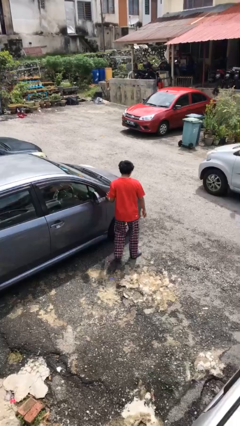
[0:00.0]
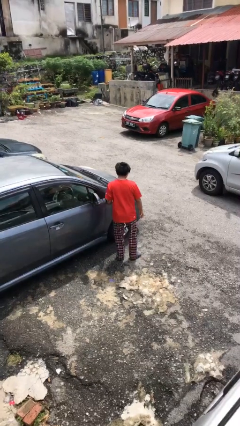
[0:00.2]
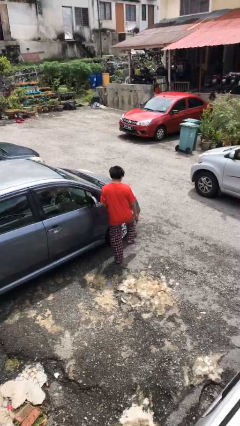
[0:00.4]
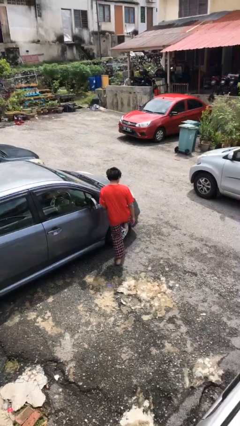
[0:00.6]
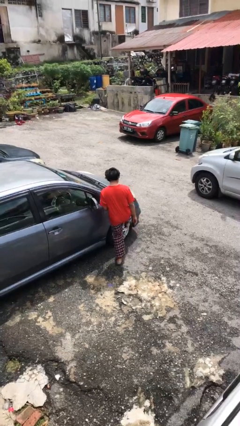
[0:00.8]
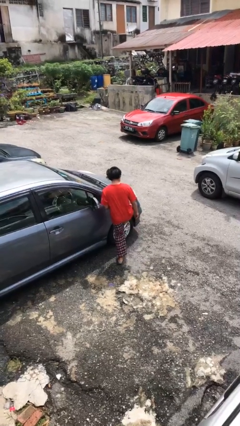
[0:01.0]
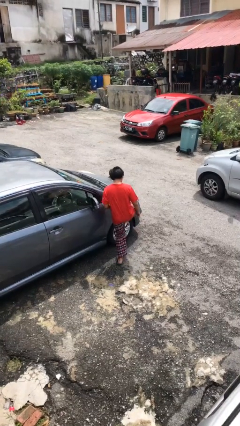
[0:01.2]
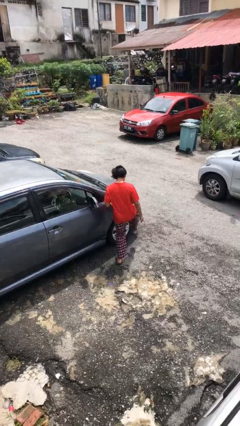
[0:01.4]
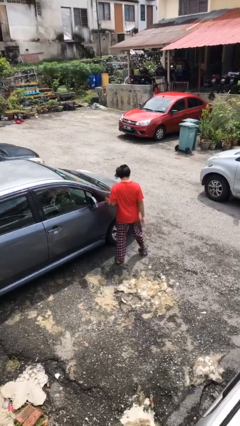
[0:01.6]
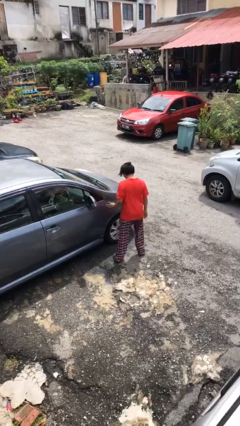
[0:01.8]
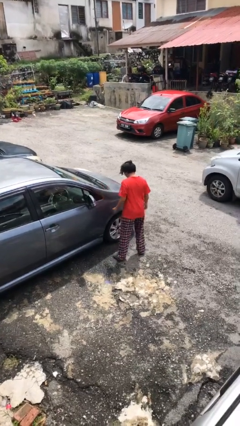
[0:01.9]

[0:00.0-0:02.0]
person kicks car tires

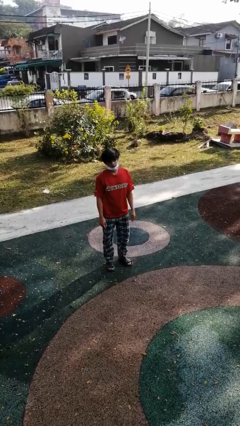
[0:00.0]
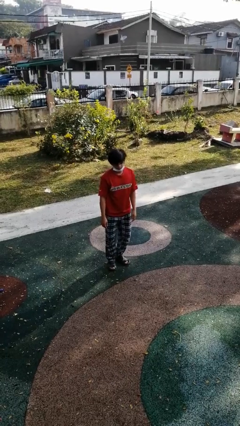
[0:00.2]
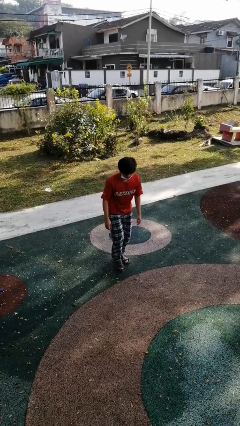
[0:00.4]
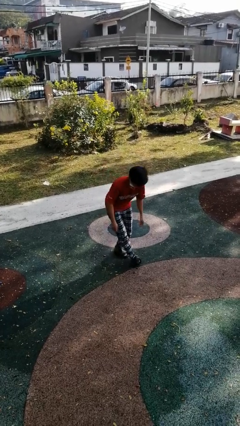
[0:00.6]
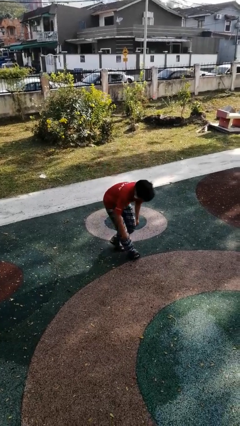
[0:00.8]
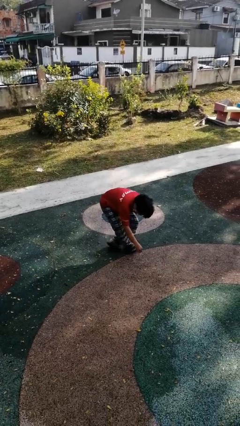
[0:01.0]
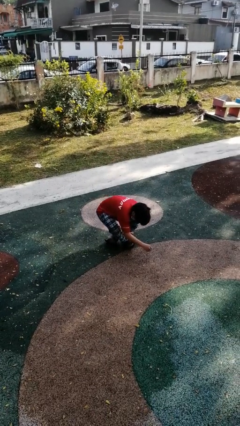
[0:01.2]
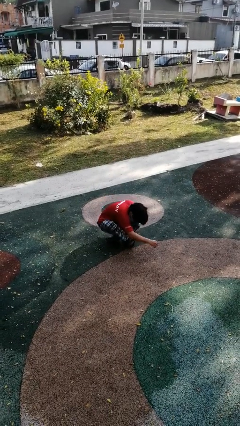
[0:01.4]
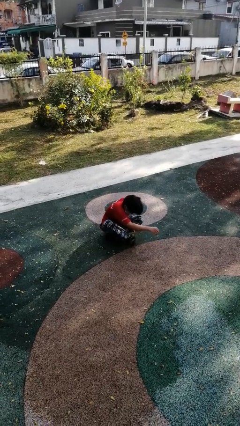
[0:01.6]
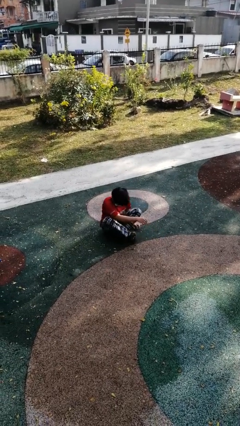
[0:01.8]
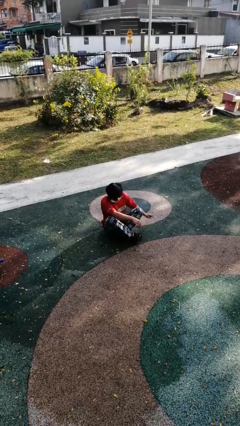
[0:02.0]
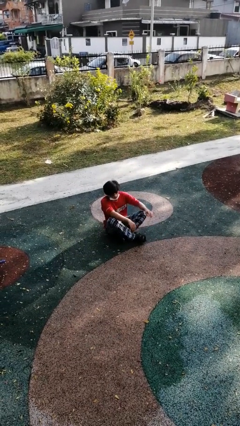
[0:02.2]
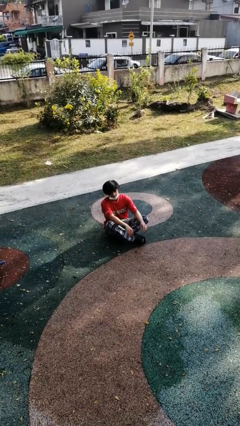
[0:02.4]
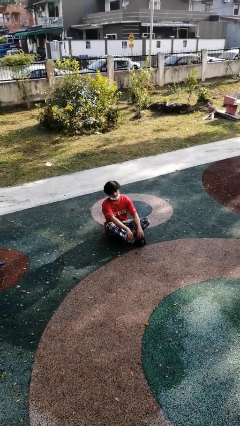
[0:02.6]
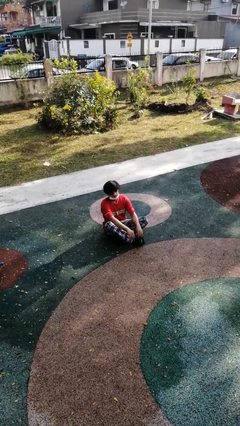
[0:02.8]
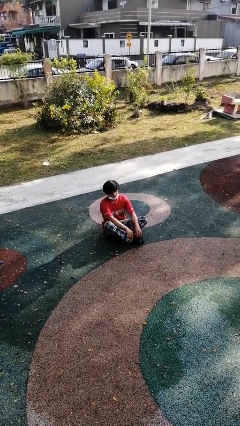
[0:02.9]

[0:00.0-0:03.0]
person sits crisscross

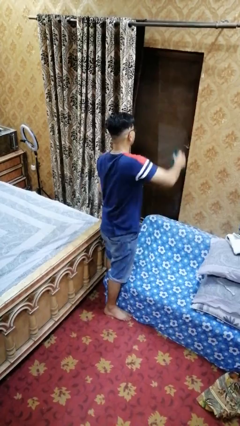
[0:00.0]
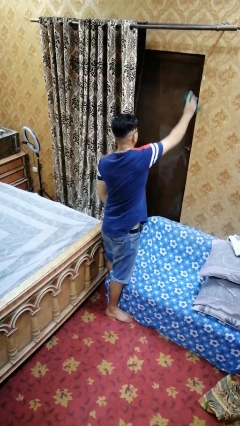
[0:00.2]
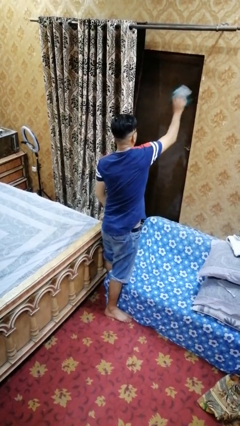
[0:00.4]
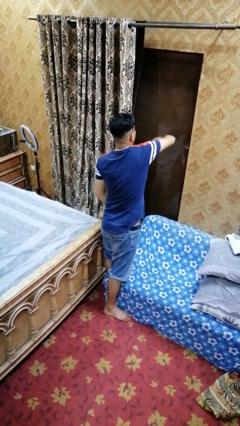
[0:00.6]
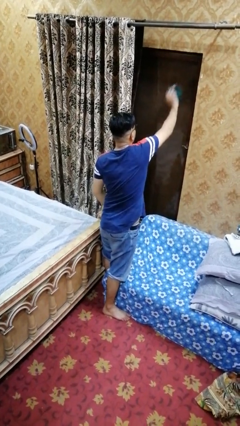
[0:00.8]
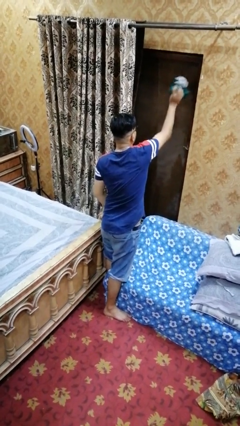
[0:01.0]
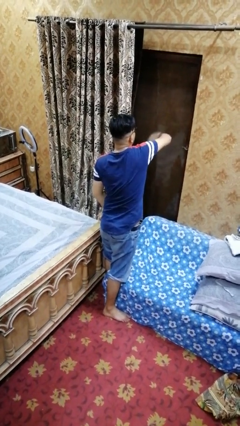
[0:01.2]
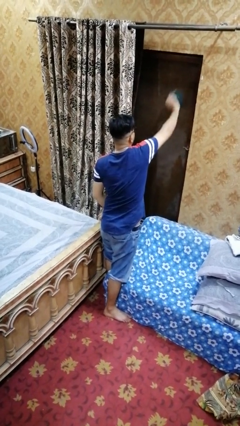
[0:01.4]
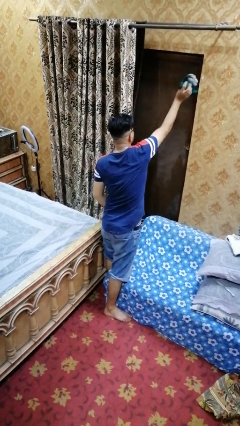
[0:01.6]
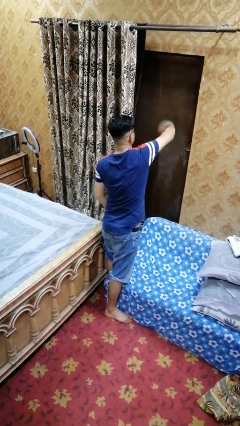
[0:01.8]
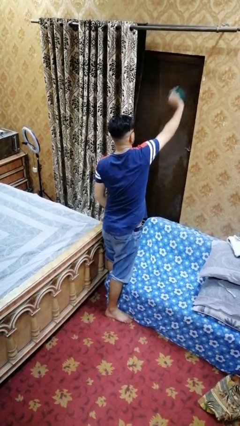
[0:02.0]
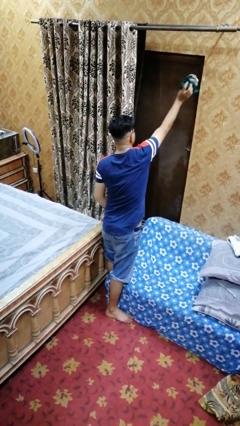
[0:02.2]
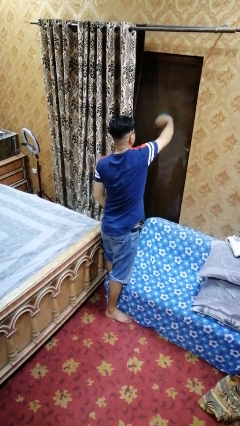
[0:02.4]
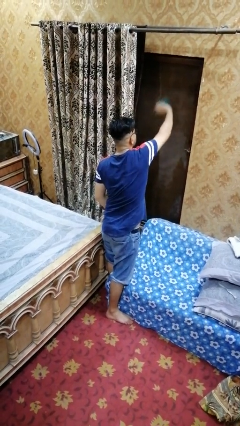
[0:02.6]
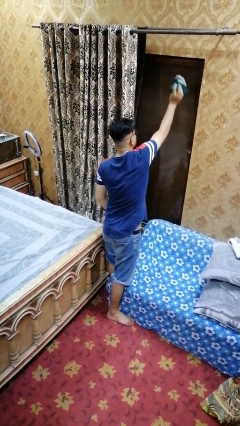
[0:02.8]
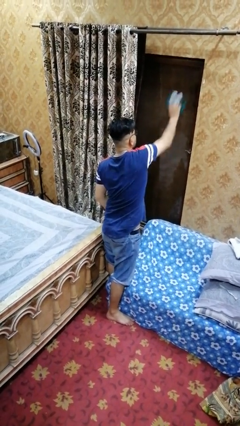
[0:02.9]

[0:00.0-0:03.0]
person washes window

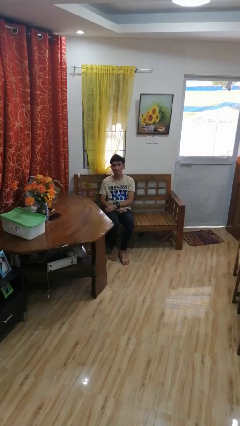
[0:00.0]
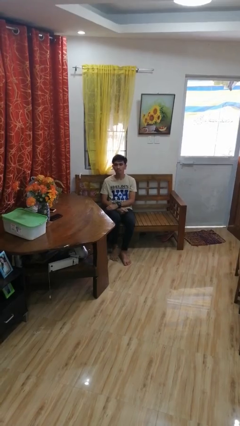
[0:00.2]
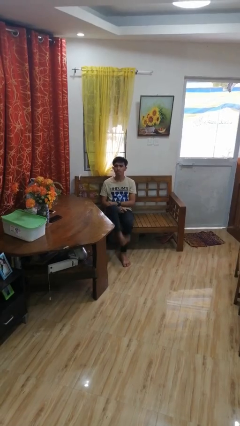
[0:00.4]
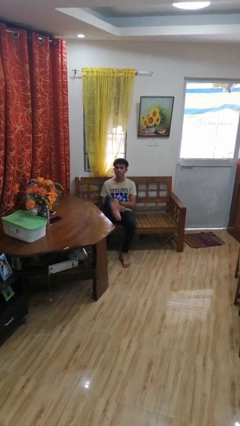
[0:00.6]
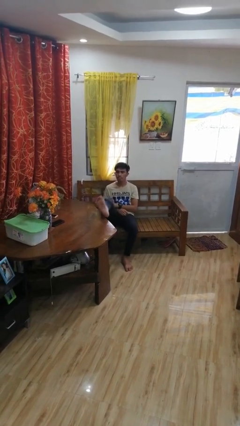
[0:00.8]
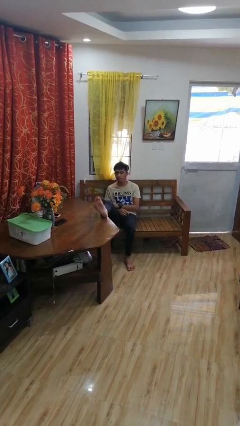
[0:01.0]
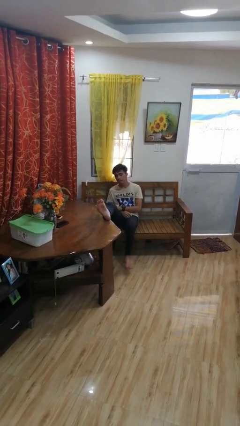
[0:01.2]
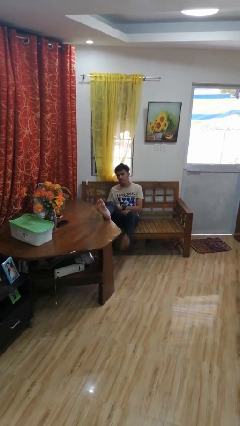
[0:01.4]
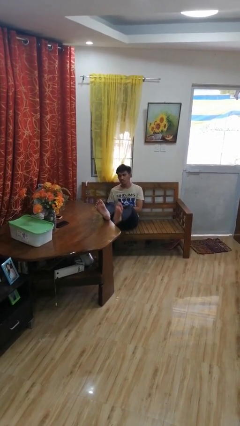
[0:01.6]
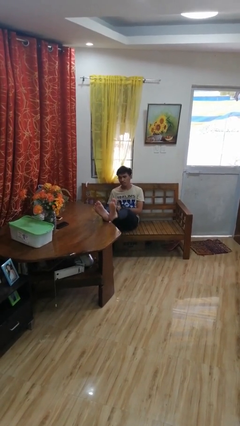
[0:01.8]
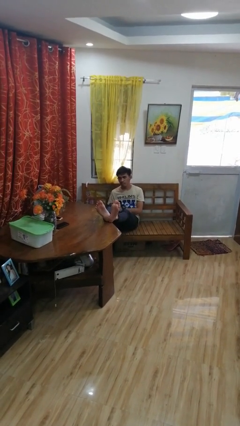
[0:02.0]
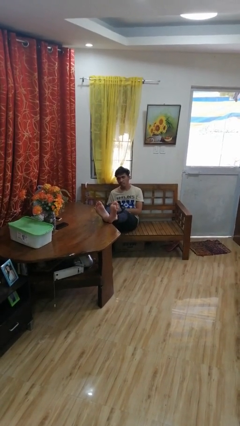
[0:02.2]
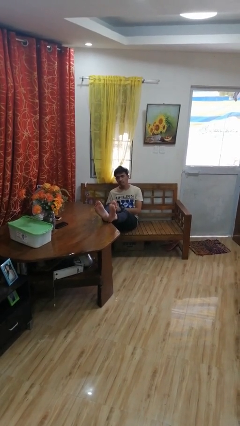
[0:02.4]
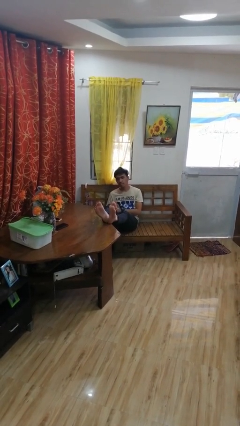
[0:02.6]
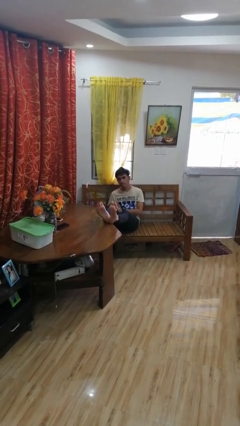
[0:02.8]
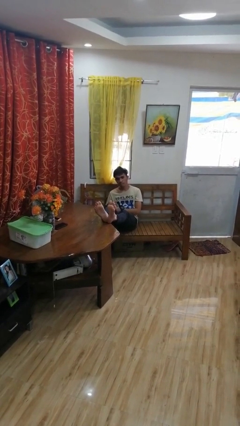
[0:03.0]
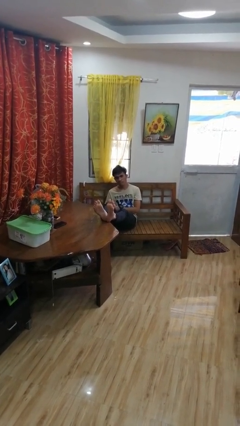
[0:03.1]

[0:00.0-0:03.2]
person puts feet up

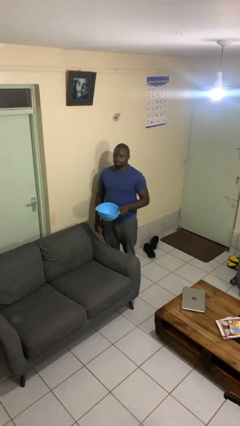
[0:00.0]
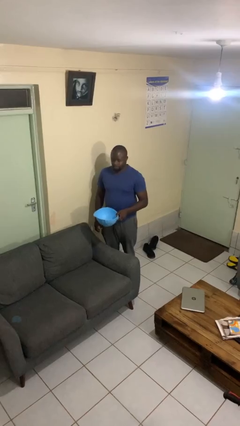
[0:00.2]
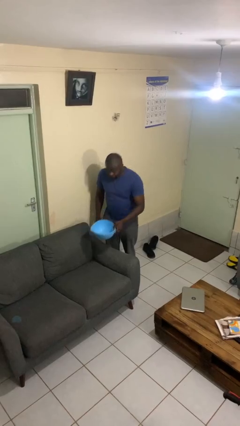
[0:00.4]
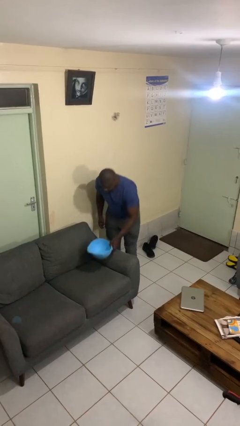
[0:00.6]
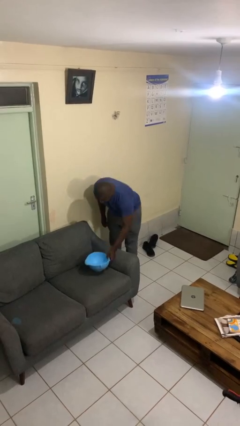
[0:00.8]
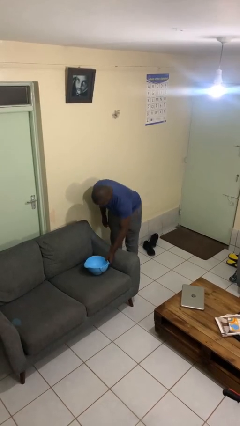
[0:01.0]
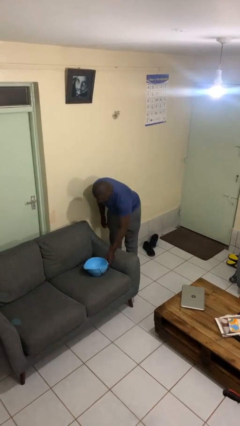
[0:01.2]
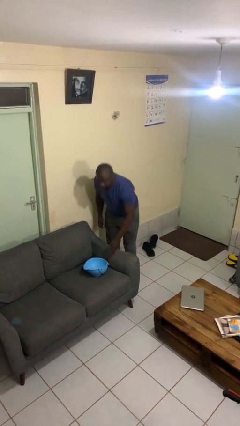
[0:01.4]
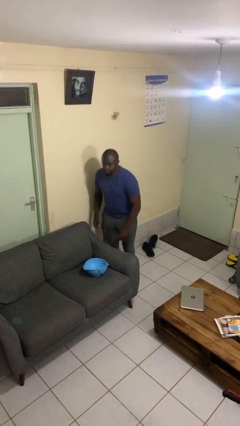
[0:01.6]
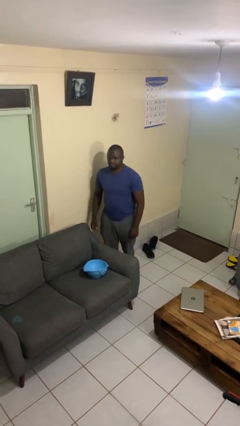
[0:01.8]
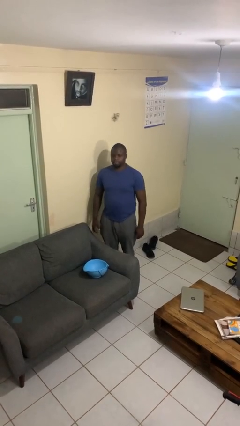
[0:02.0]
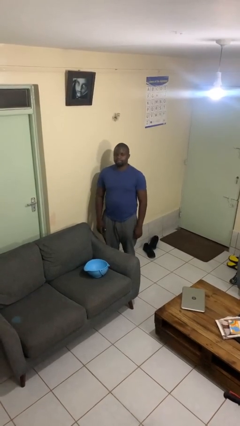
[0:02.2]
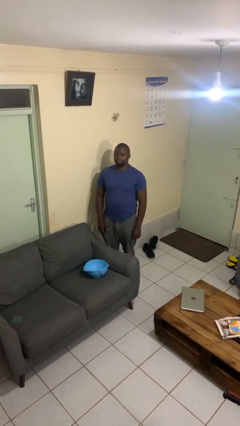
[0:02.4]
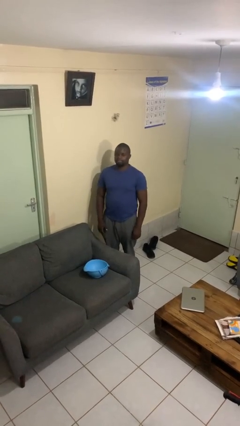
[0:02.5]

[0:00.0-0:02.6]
person puts down object on couch

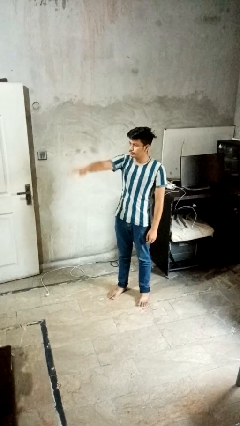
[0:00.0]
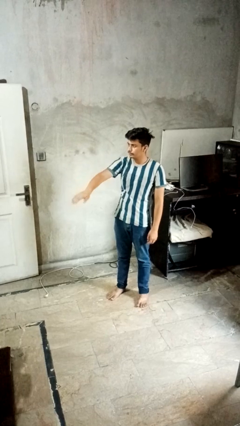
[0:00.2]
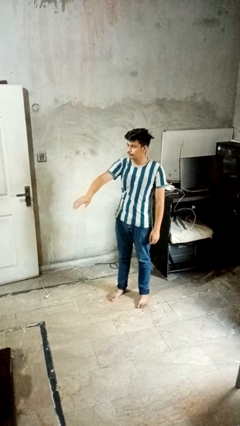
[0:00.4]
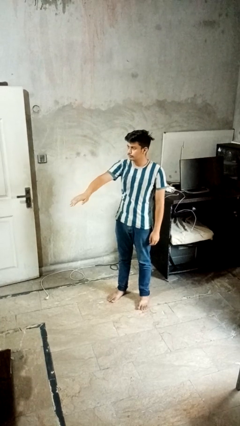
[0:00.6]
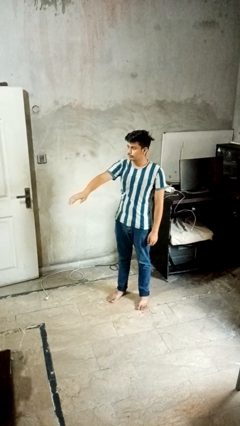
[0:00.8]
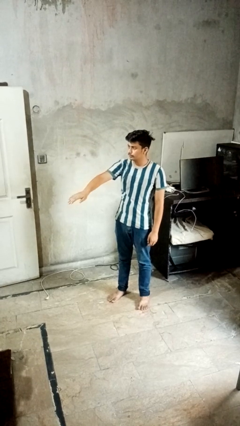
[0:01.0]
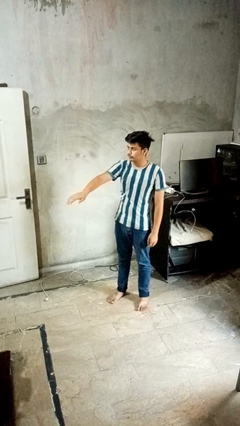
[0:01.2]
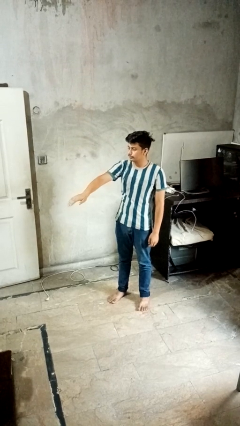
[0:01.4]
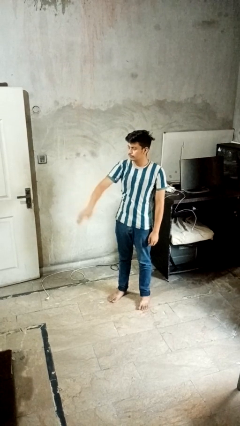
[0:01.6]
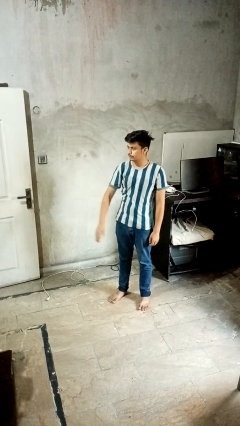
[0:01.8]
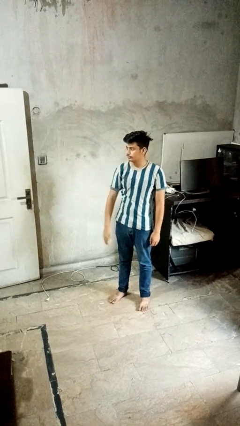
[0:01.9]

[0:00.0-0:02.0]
person gestures swipe down

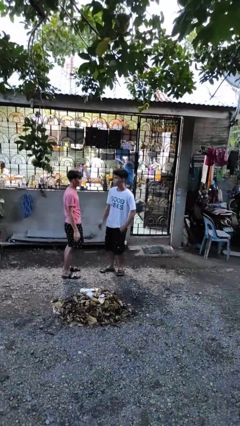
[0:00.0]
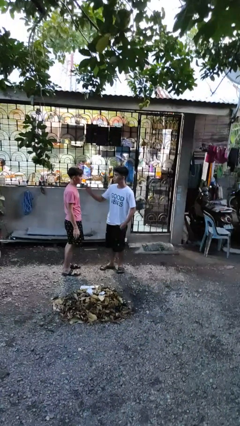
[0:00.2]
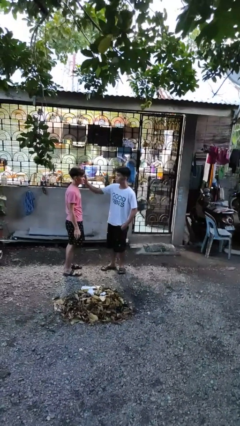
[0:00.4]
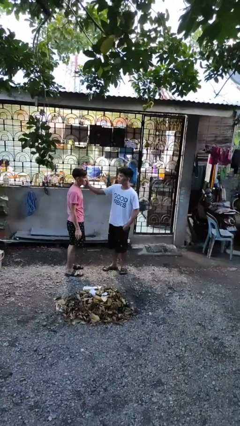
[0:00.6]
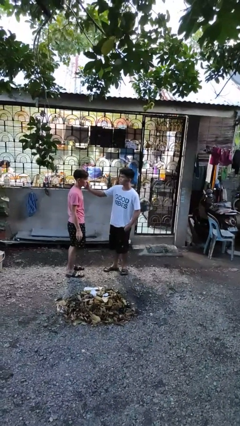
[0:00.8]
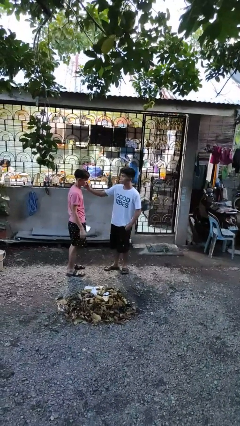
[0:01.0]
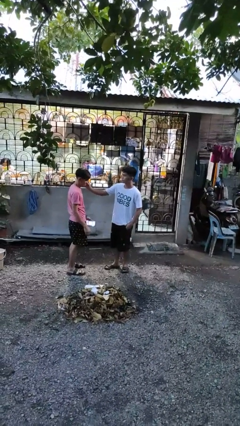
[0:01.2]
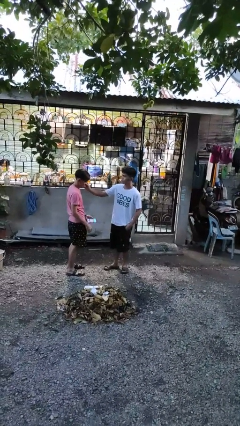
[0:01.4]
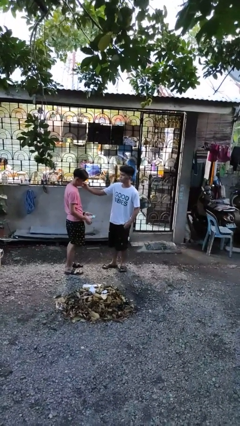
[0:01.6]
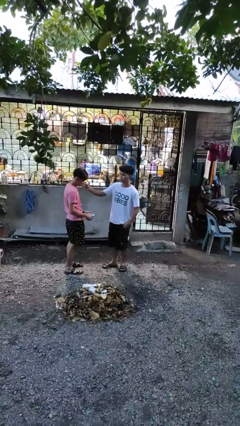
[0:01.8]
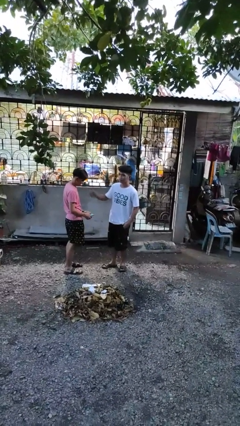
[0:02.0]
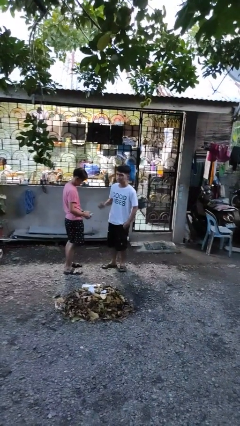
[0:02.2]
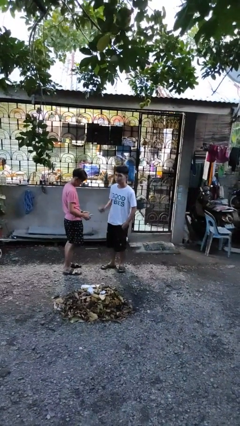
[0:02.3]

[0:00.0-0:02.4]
person touches face of person
